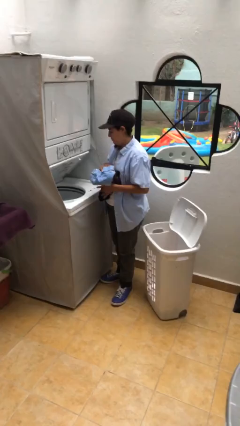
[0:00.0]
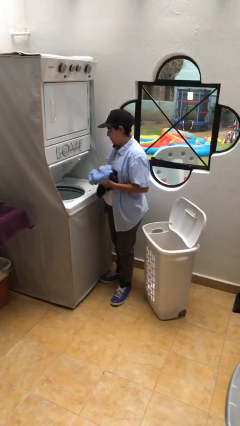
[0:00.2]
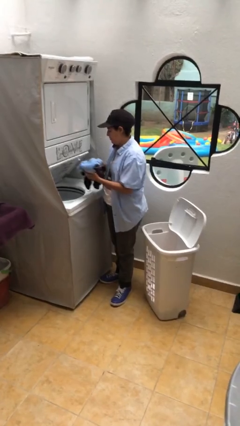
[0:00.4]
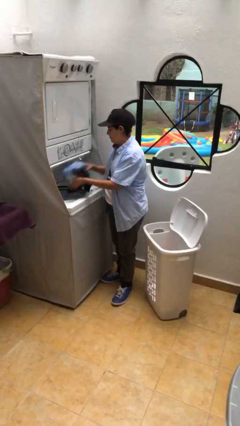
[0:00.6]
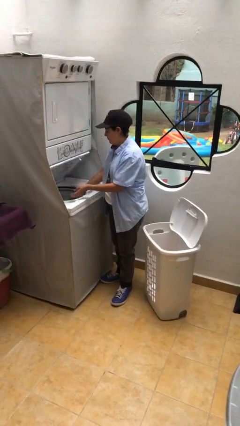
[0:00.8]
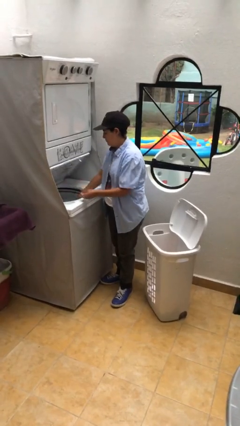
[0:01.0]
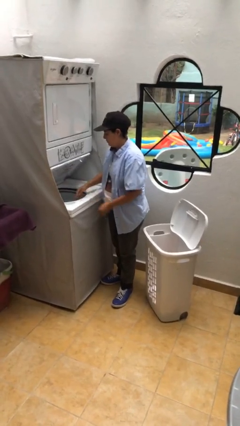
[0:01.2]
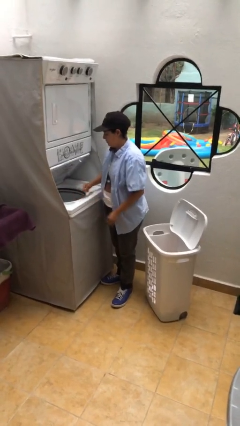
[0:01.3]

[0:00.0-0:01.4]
person loads clotheswasher

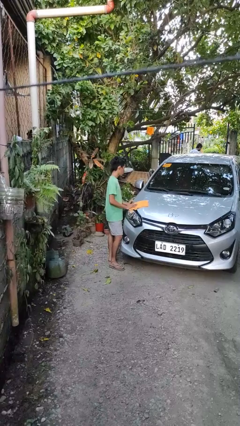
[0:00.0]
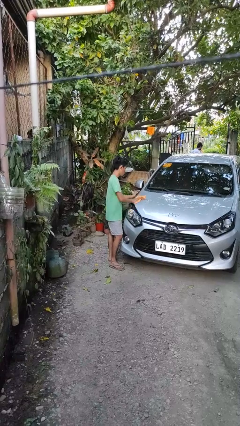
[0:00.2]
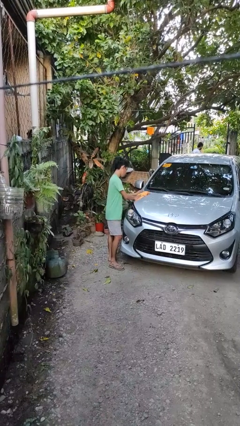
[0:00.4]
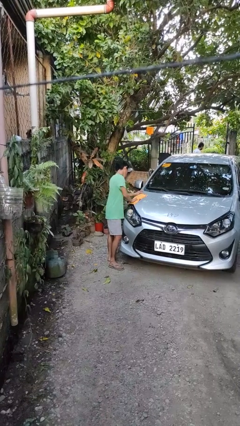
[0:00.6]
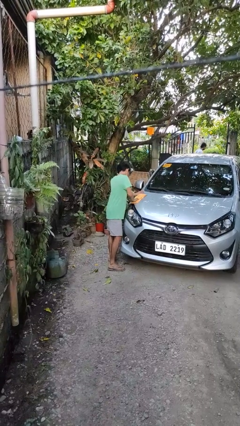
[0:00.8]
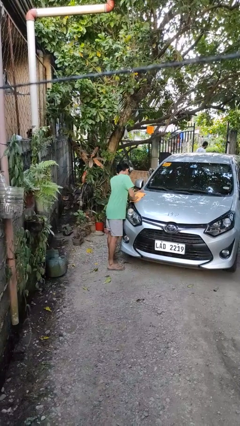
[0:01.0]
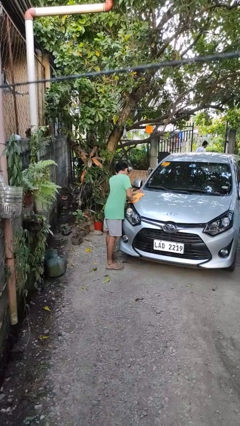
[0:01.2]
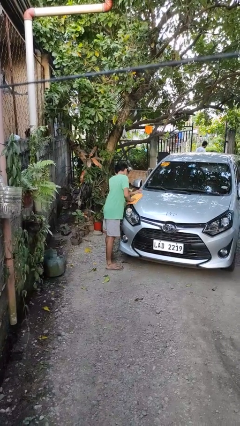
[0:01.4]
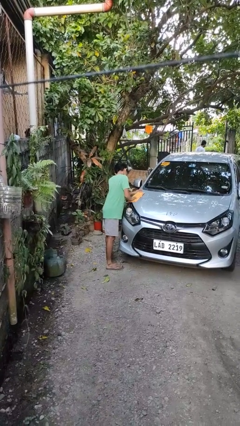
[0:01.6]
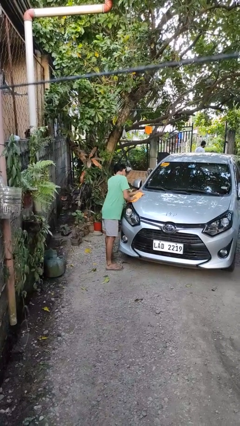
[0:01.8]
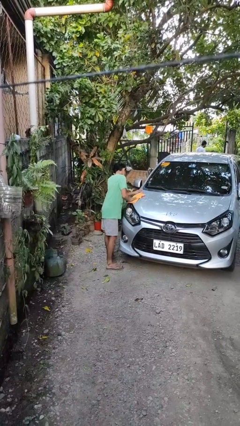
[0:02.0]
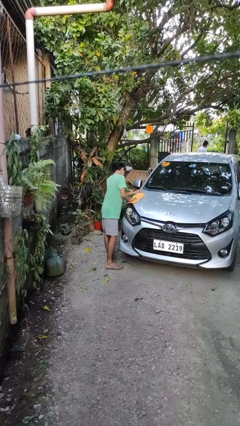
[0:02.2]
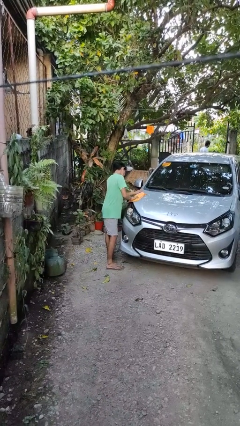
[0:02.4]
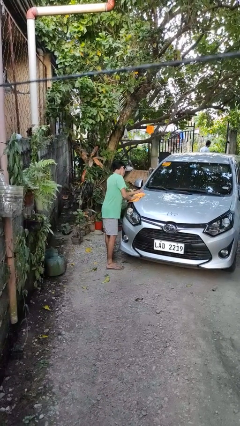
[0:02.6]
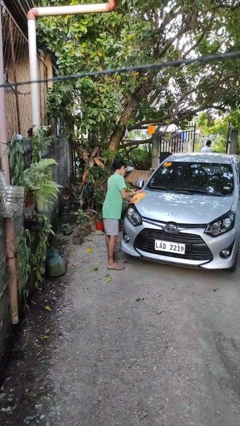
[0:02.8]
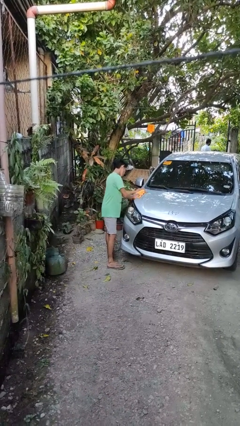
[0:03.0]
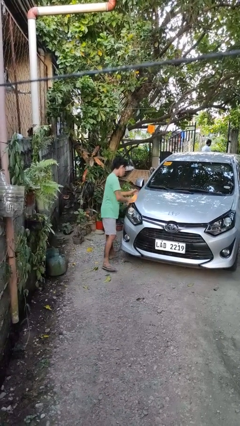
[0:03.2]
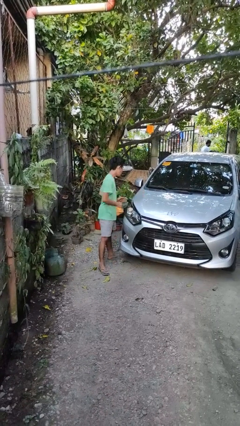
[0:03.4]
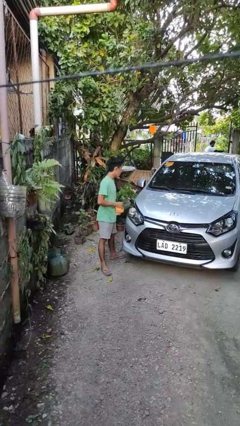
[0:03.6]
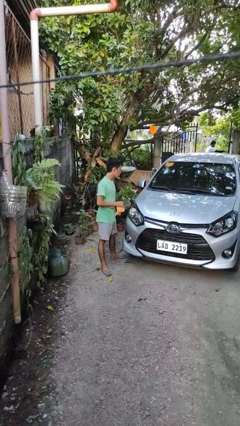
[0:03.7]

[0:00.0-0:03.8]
person polishes car with rag

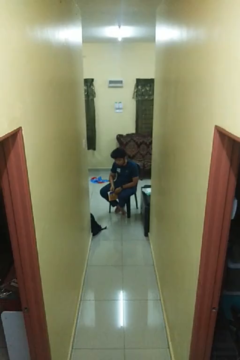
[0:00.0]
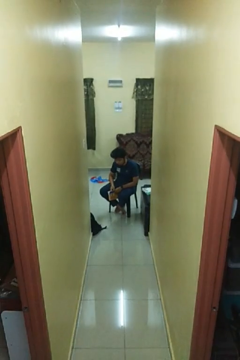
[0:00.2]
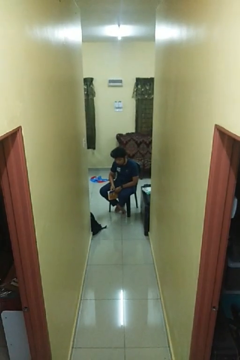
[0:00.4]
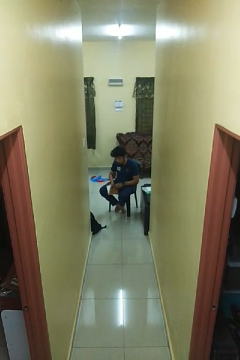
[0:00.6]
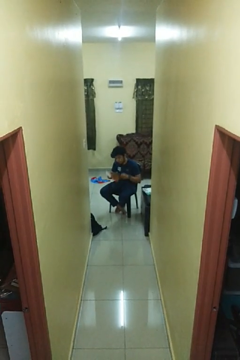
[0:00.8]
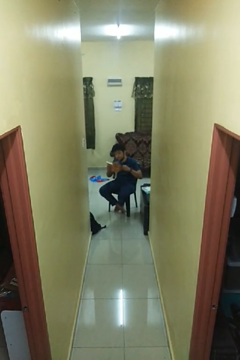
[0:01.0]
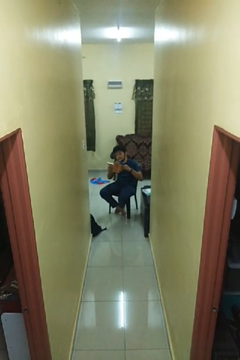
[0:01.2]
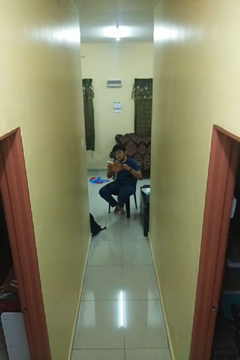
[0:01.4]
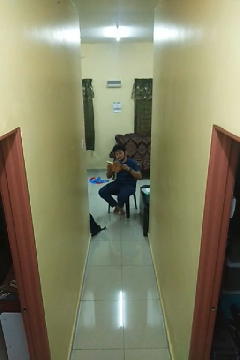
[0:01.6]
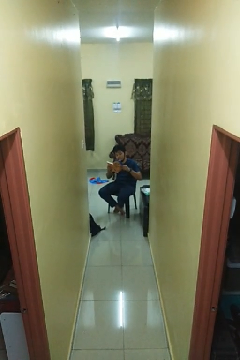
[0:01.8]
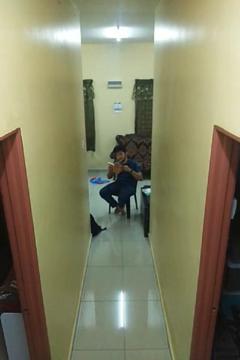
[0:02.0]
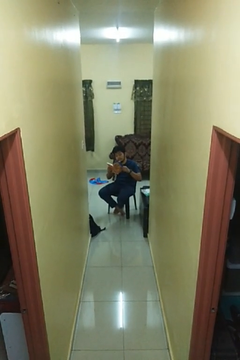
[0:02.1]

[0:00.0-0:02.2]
person reads book

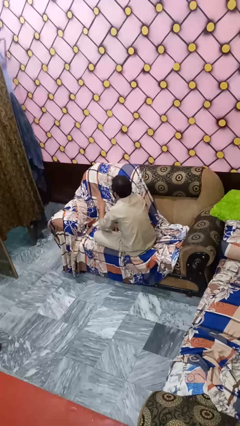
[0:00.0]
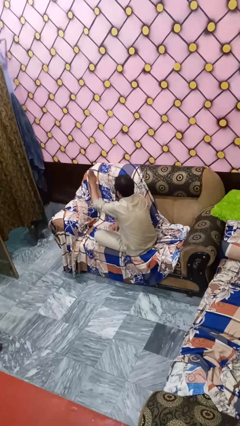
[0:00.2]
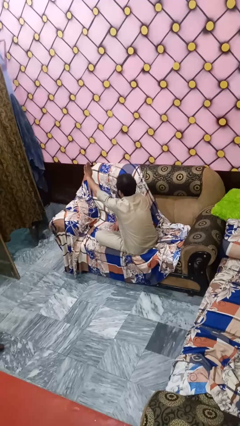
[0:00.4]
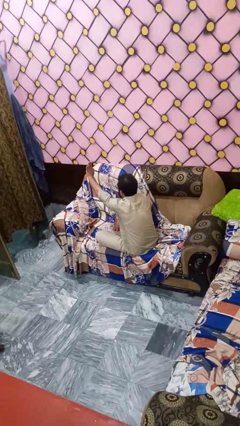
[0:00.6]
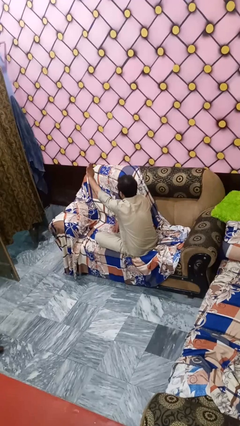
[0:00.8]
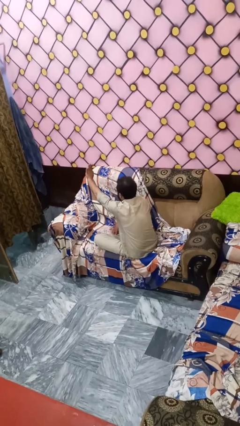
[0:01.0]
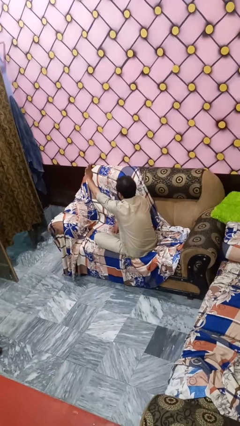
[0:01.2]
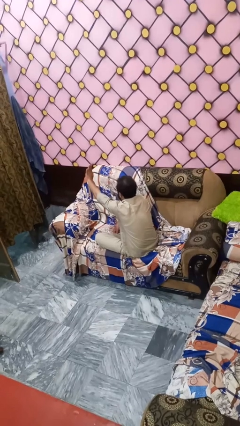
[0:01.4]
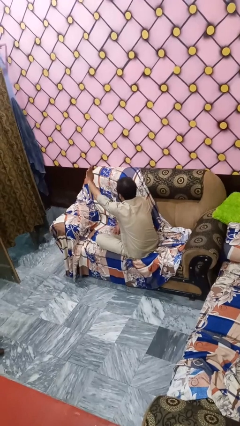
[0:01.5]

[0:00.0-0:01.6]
person gestures stop

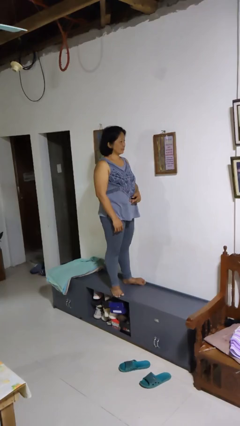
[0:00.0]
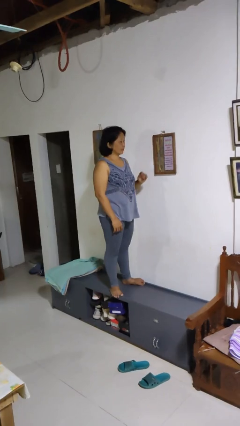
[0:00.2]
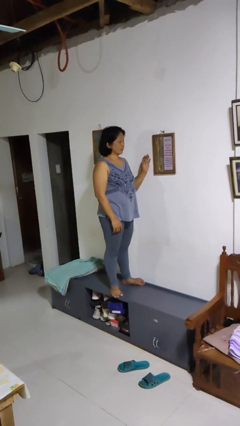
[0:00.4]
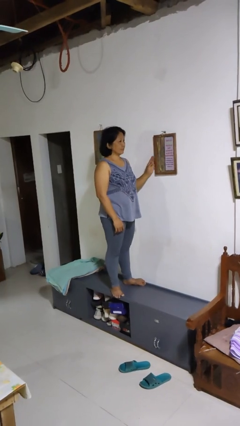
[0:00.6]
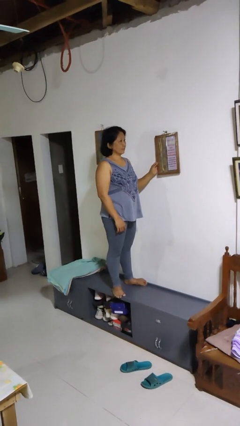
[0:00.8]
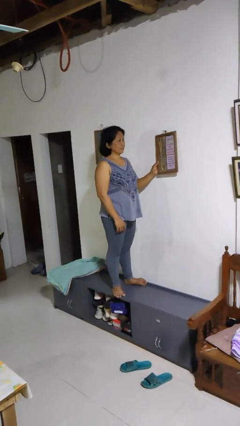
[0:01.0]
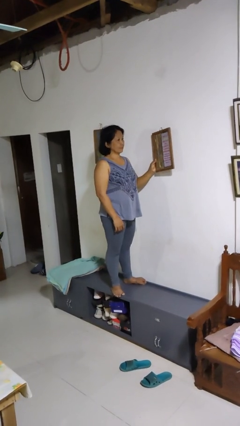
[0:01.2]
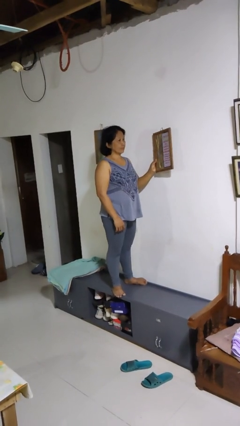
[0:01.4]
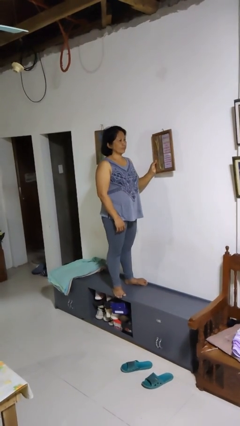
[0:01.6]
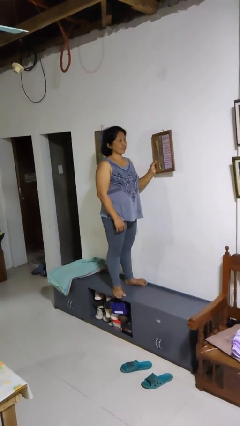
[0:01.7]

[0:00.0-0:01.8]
person takes down picture frame

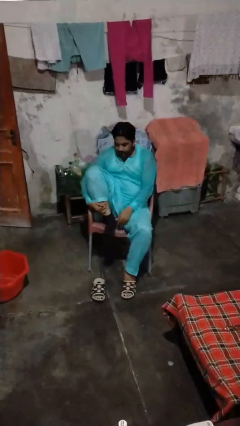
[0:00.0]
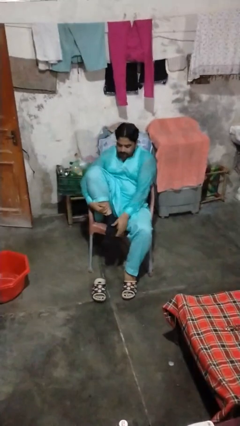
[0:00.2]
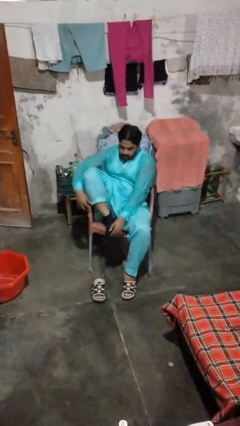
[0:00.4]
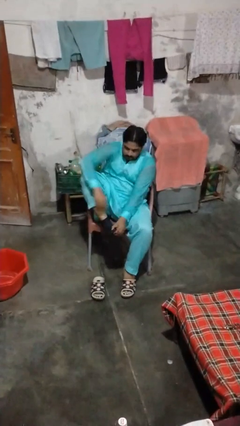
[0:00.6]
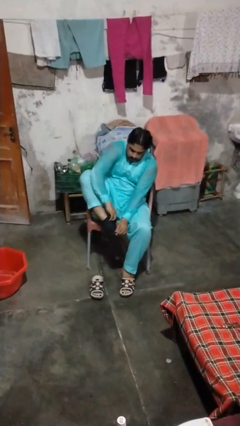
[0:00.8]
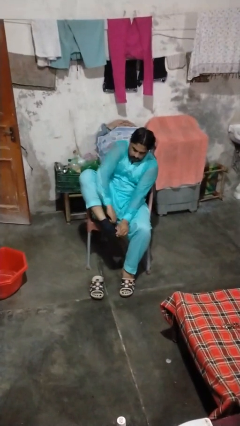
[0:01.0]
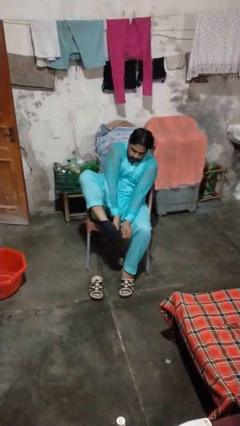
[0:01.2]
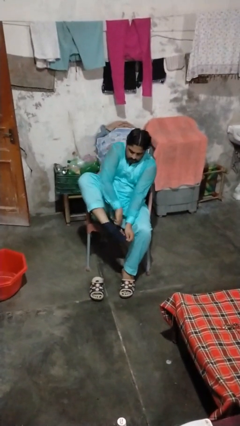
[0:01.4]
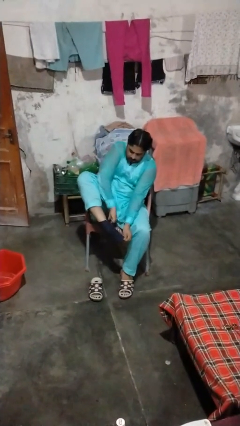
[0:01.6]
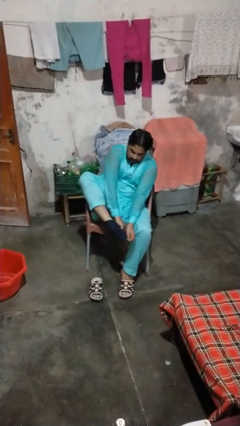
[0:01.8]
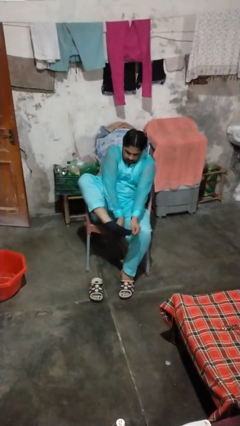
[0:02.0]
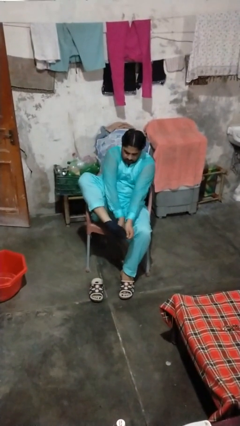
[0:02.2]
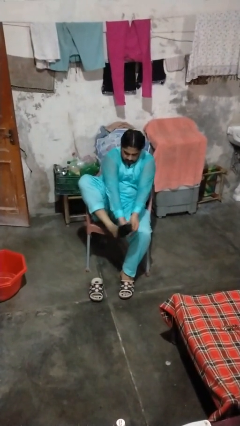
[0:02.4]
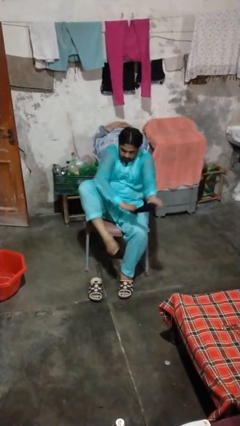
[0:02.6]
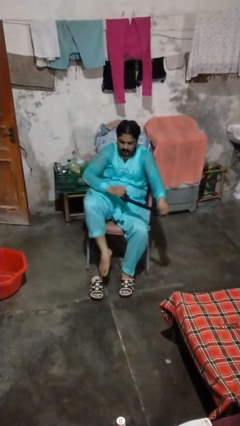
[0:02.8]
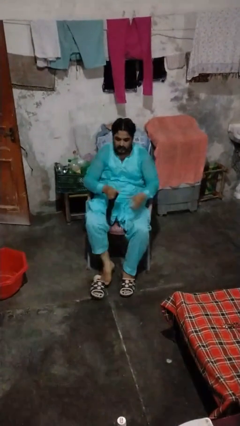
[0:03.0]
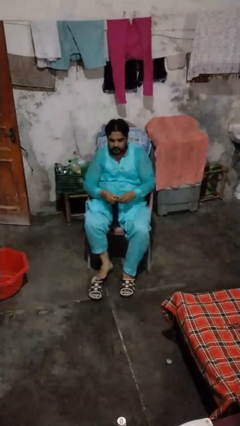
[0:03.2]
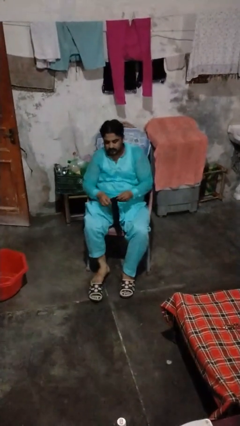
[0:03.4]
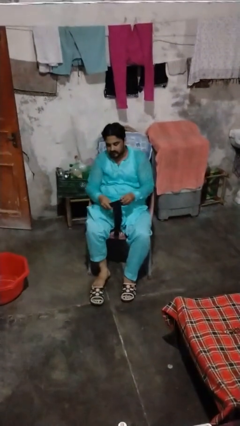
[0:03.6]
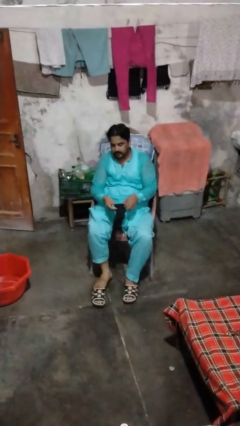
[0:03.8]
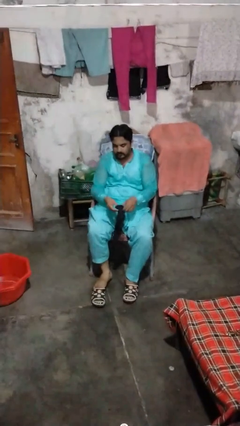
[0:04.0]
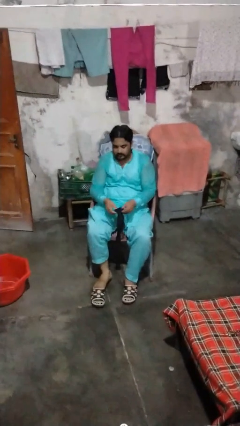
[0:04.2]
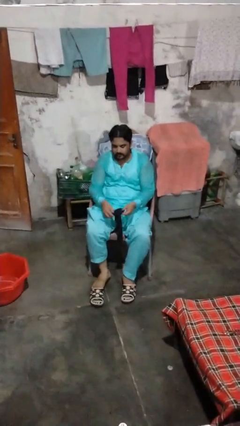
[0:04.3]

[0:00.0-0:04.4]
person takes off socks

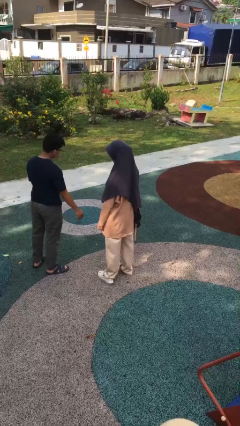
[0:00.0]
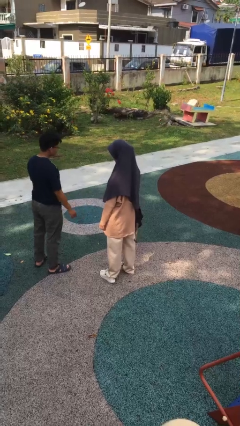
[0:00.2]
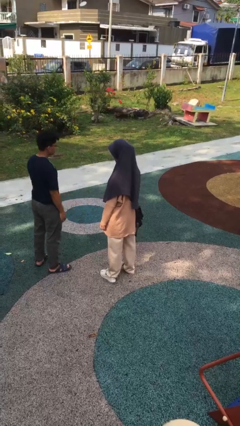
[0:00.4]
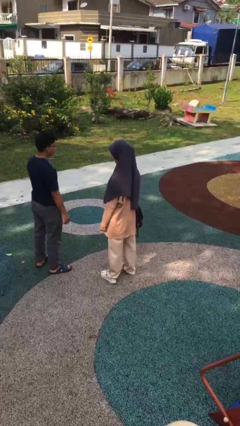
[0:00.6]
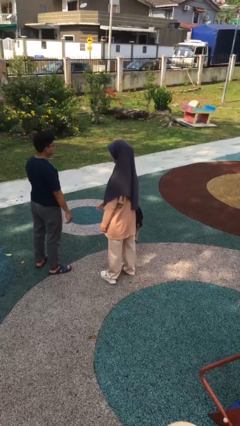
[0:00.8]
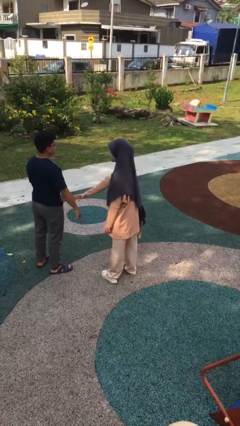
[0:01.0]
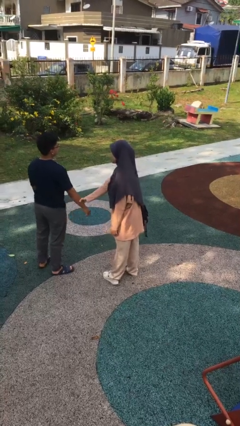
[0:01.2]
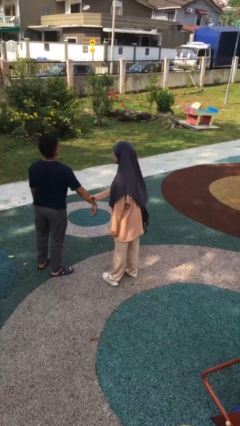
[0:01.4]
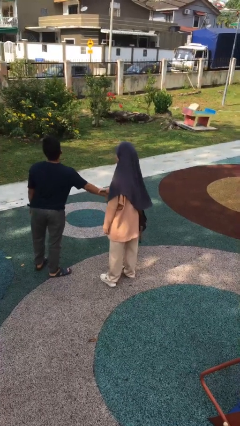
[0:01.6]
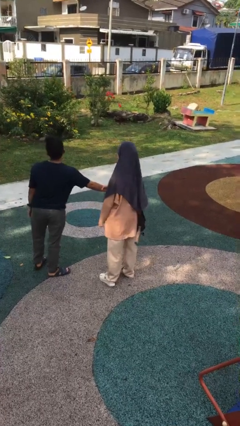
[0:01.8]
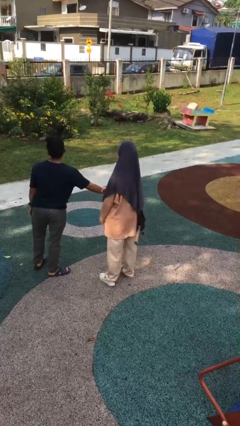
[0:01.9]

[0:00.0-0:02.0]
person grabs person by forearm

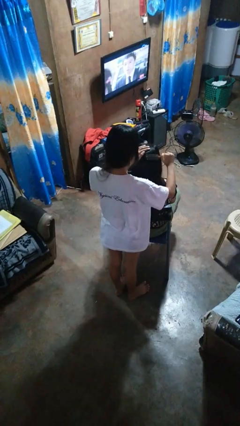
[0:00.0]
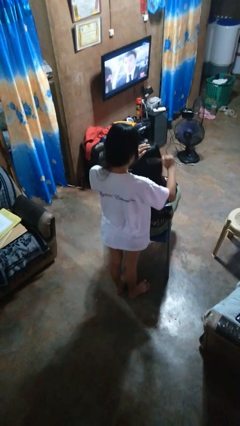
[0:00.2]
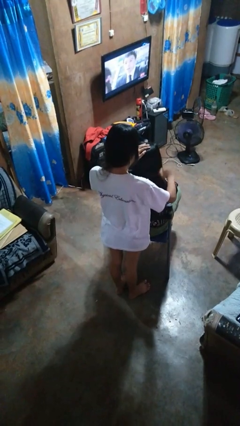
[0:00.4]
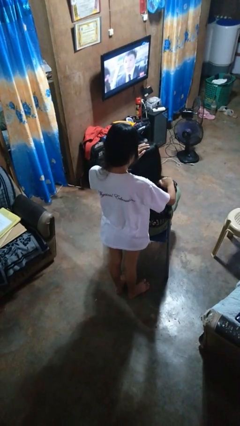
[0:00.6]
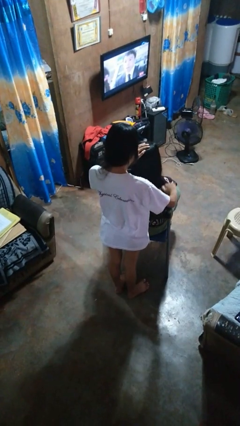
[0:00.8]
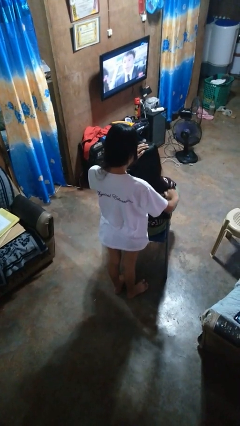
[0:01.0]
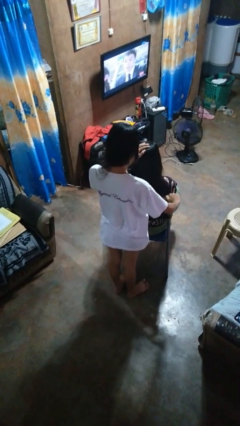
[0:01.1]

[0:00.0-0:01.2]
person brushes hair of person
